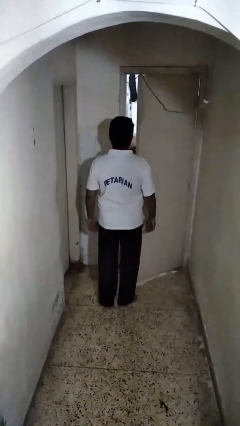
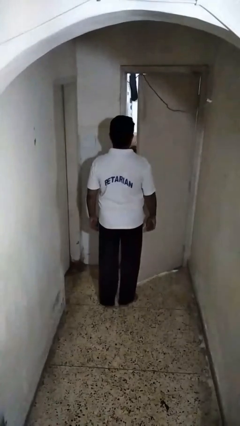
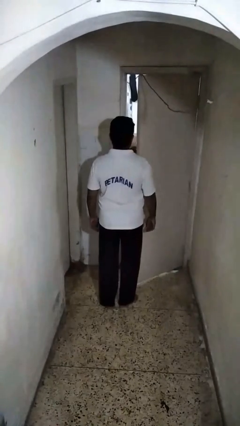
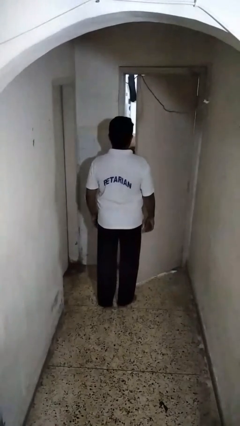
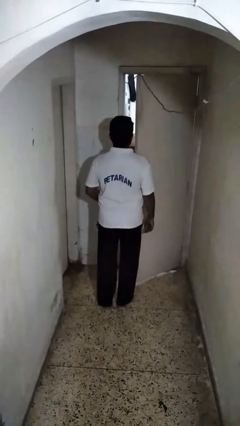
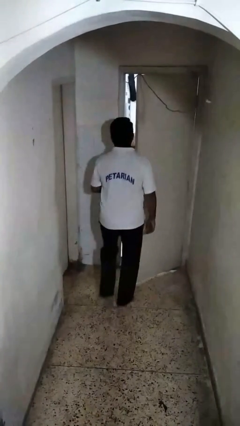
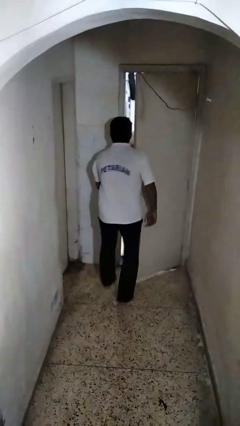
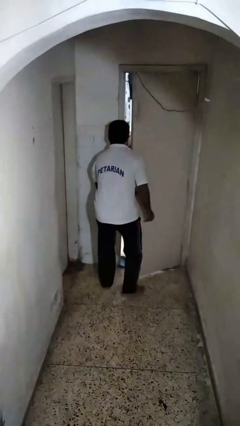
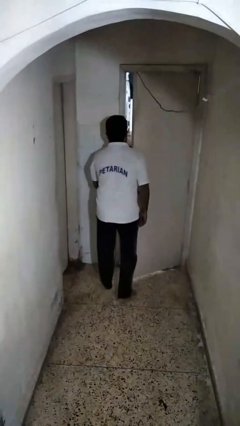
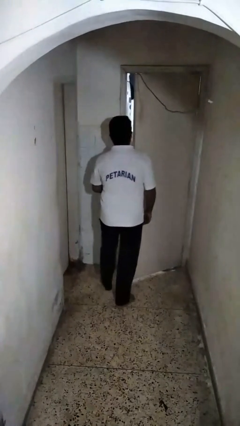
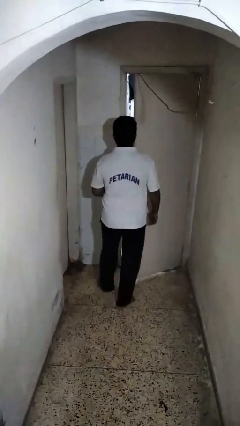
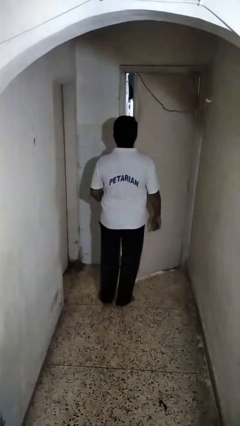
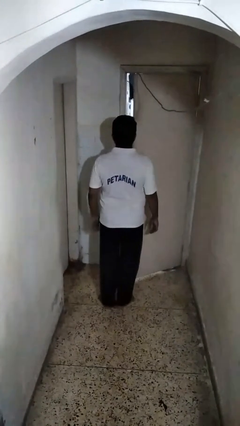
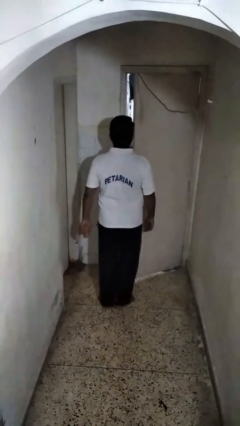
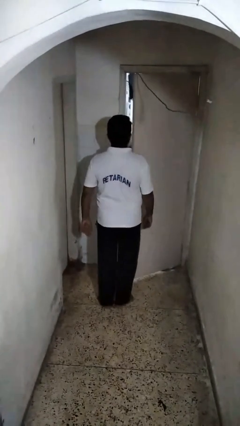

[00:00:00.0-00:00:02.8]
person bumps into wall

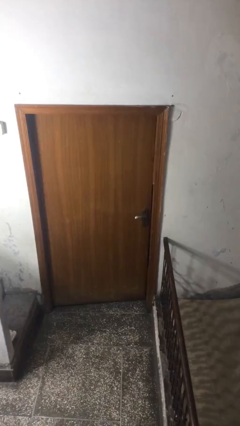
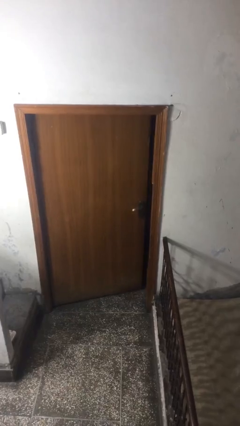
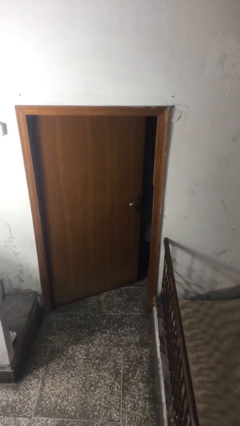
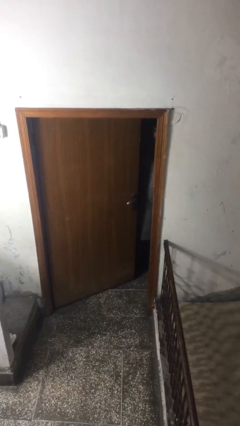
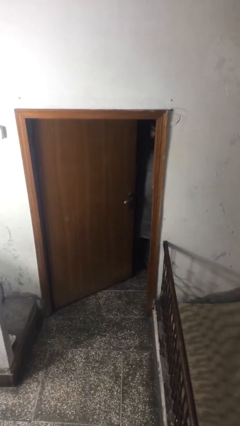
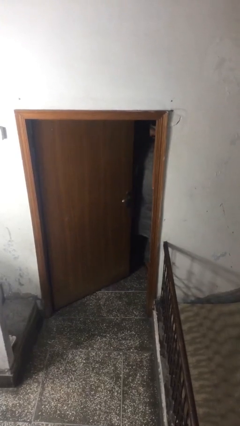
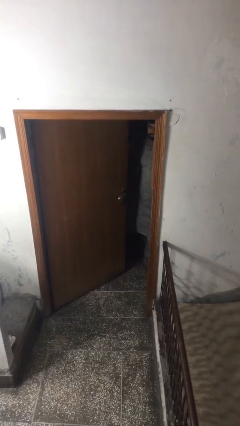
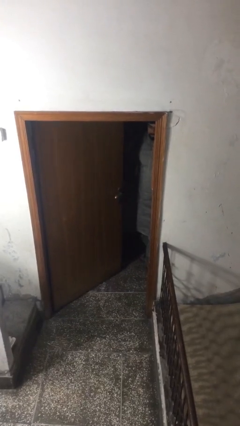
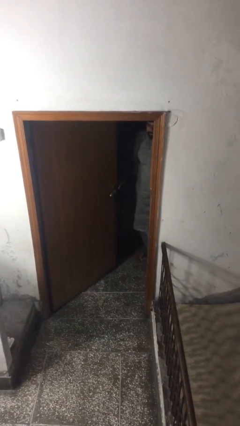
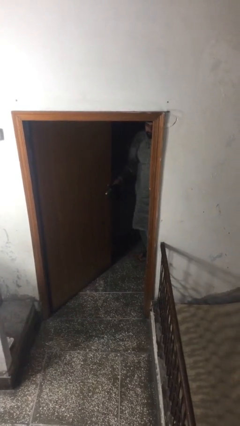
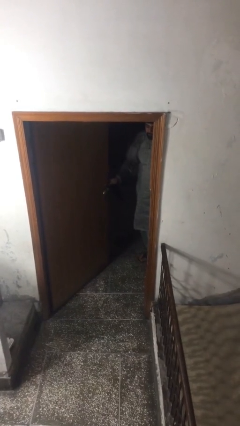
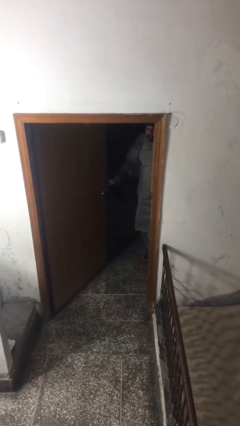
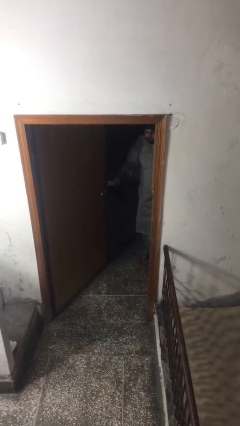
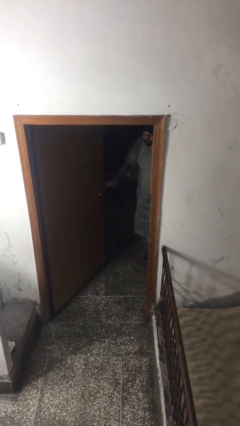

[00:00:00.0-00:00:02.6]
person opens facility door

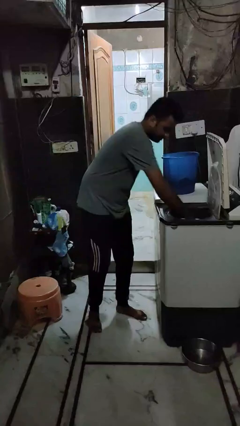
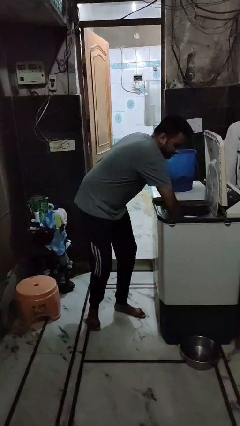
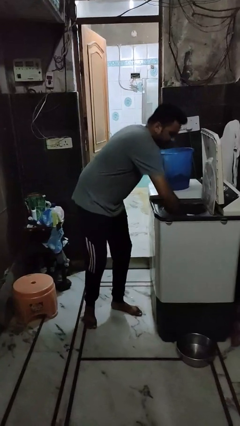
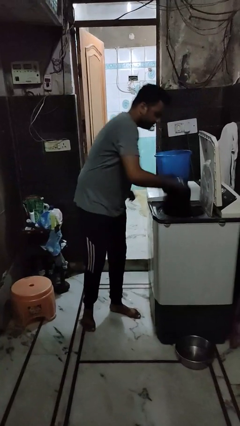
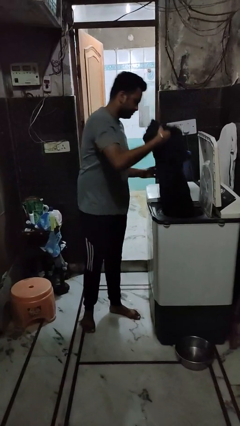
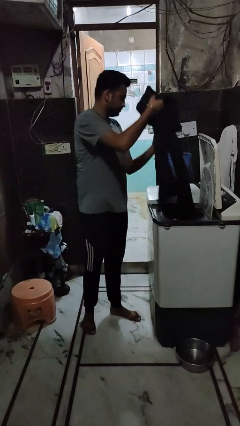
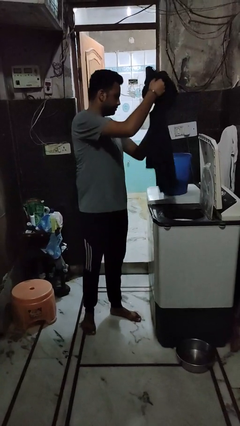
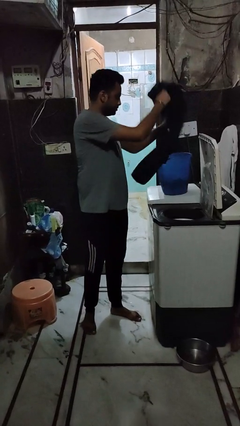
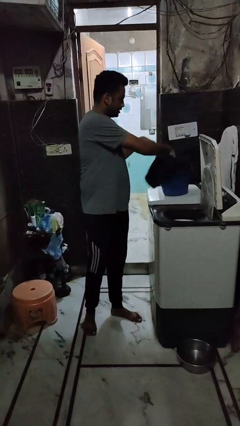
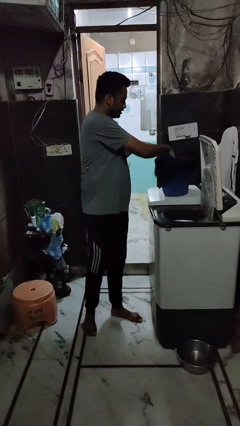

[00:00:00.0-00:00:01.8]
person unloads dryer

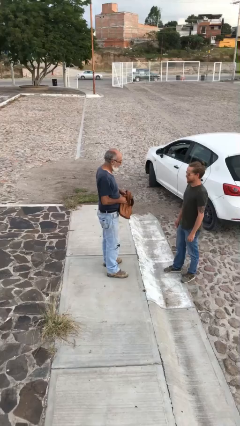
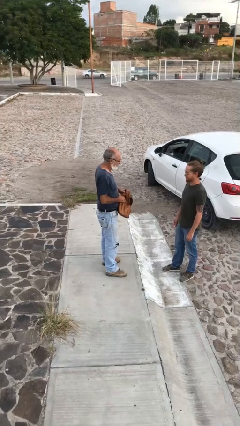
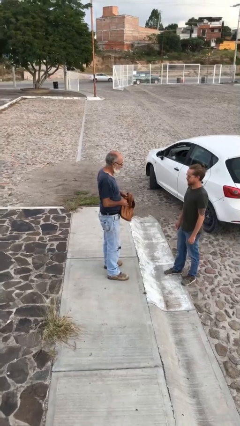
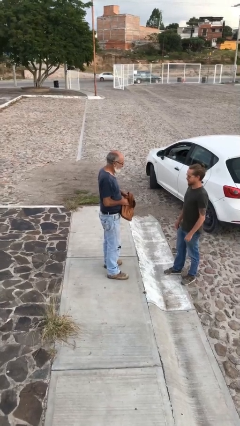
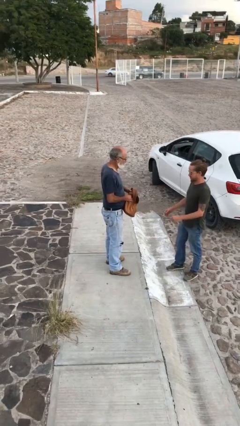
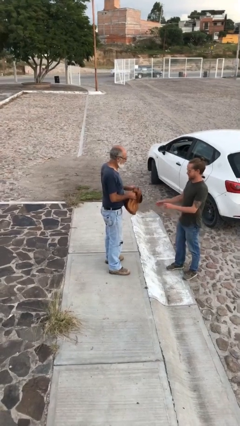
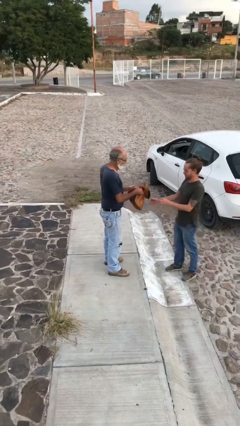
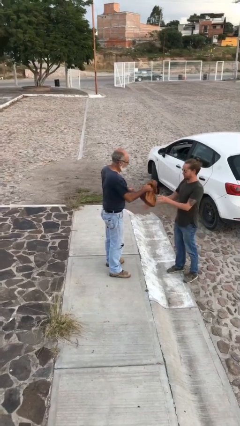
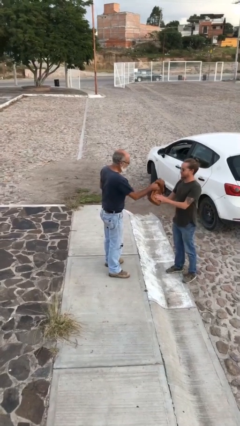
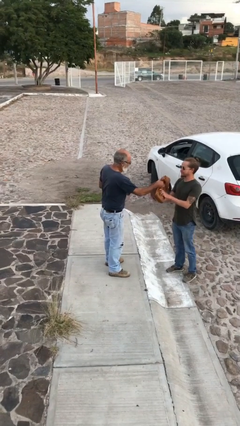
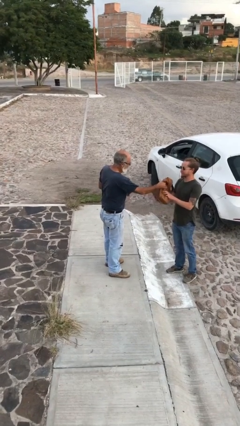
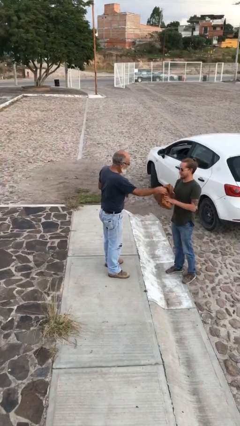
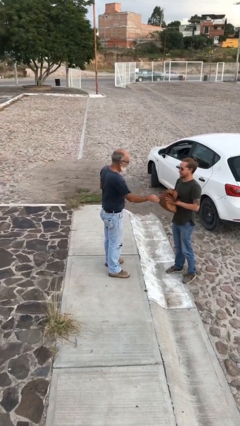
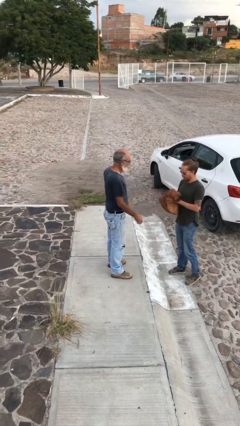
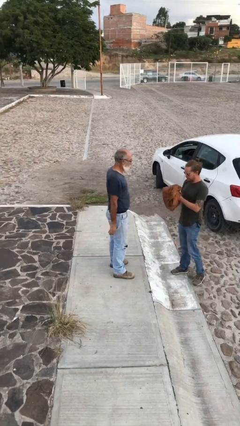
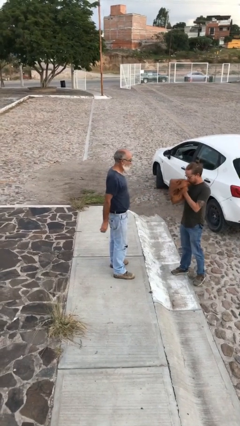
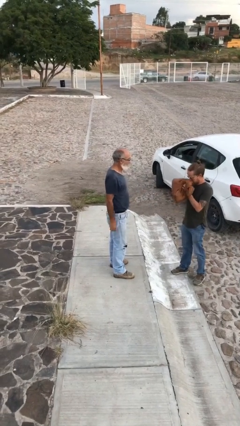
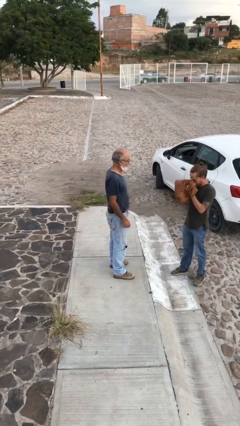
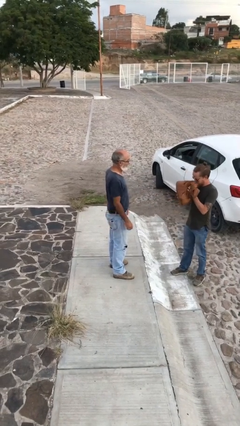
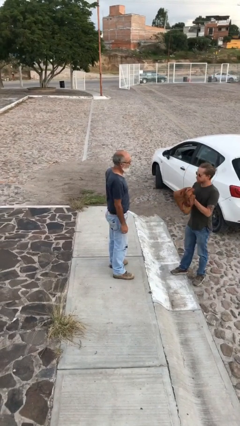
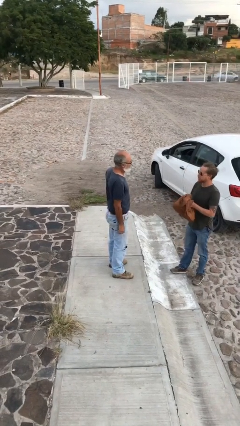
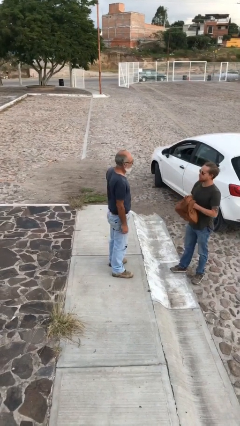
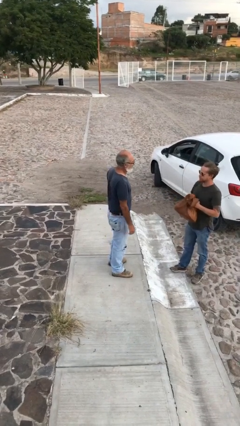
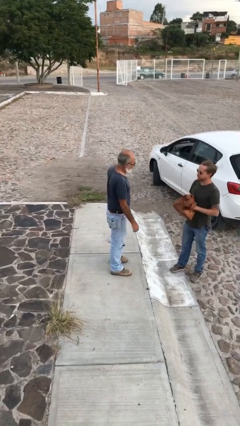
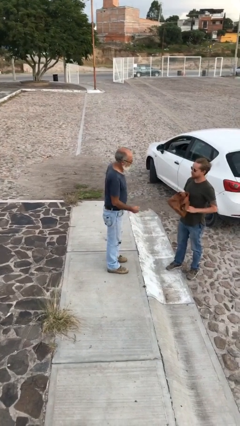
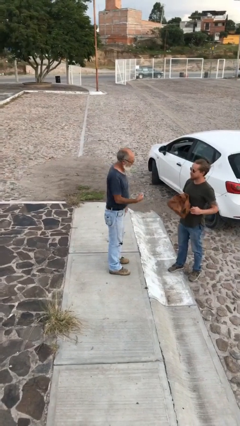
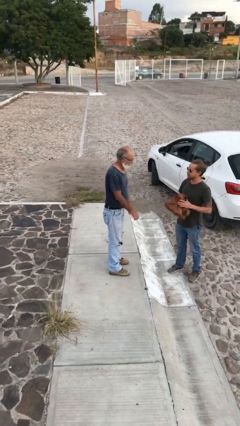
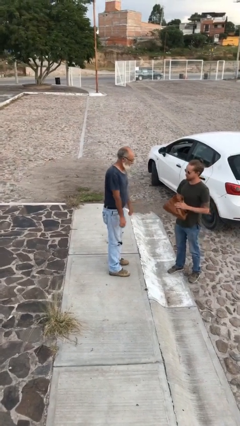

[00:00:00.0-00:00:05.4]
person transfers object to person

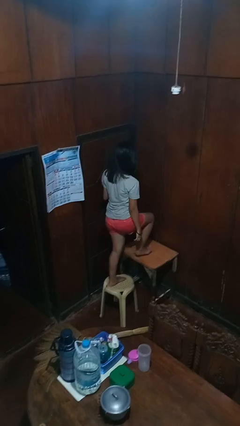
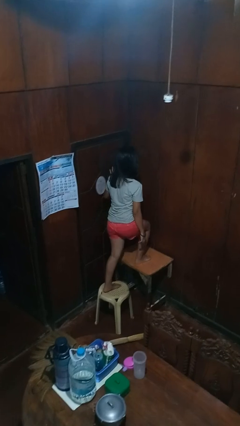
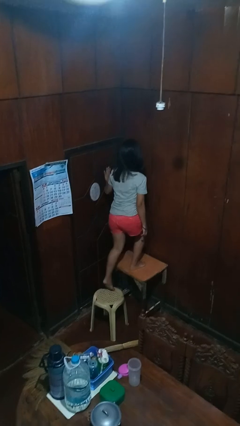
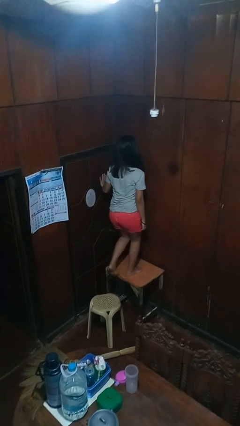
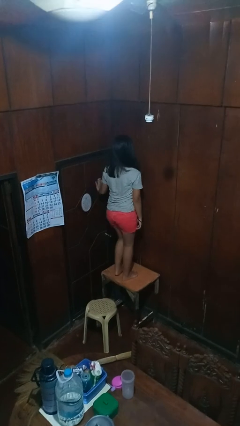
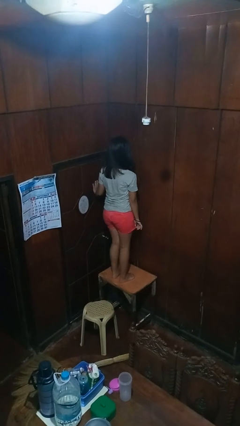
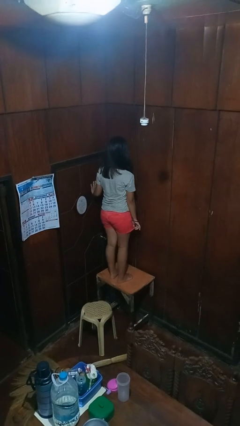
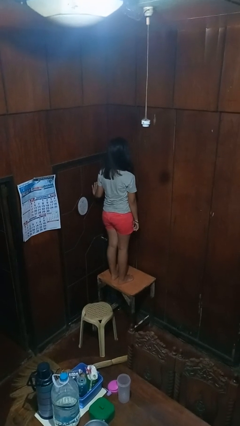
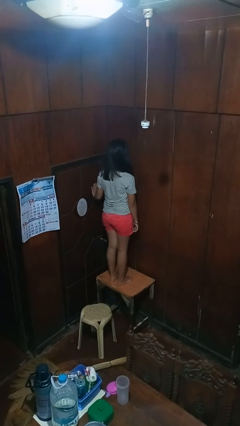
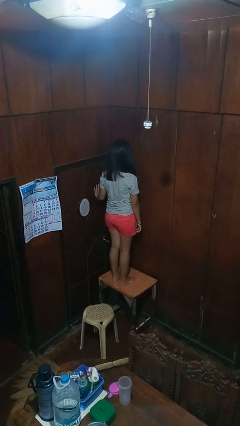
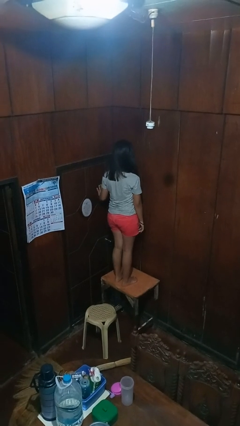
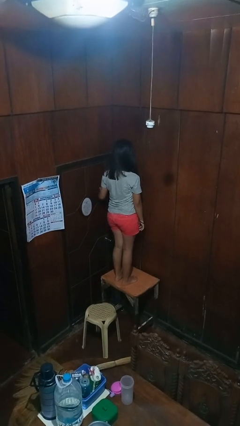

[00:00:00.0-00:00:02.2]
person climbs on table

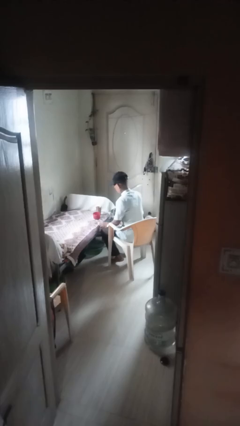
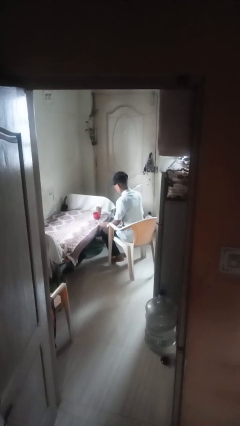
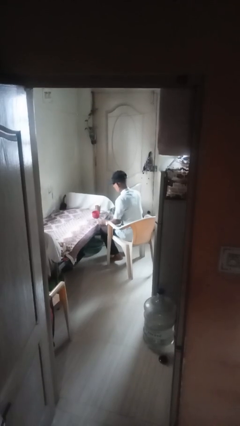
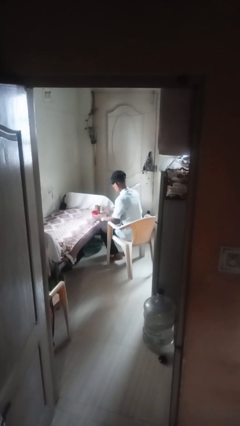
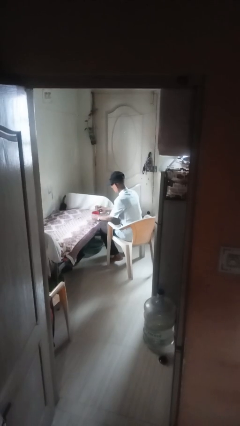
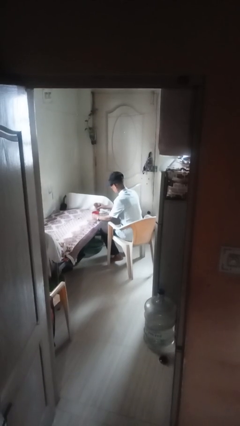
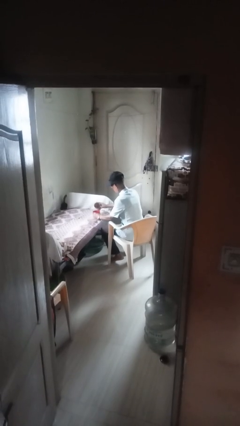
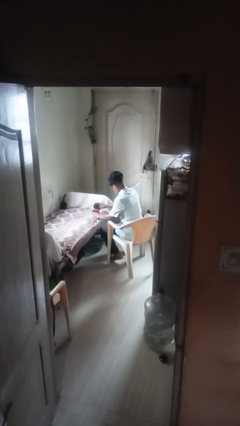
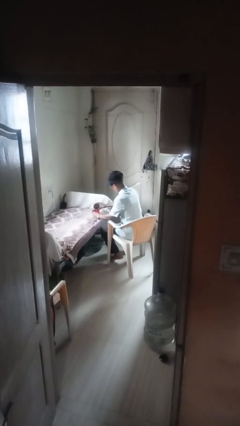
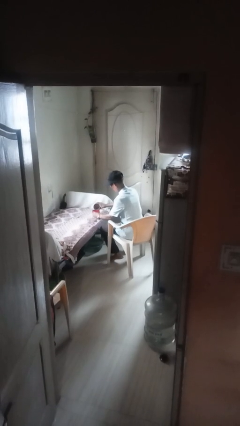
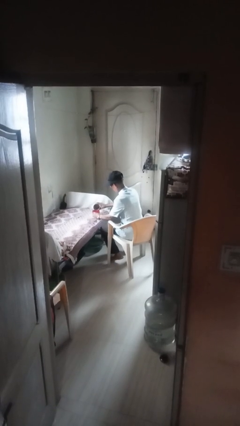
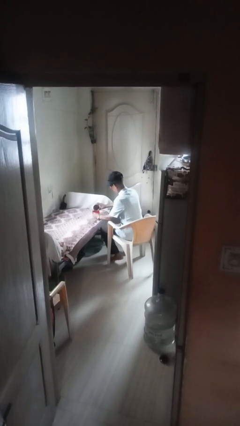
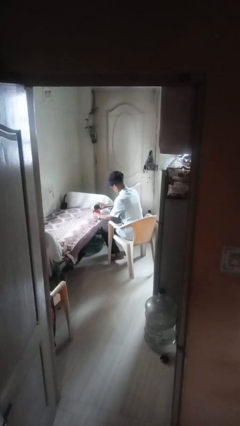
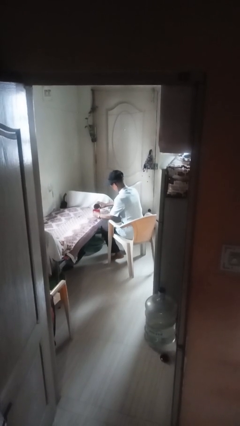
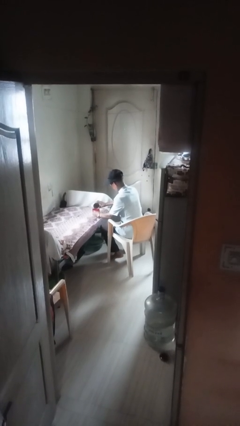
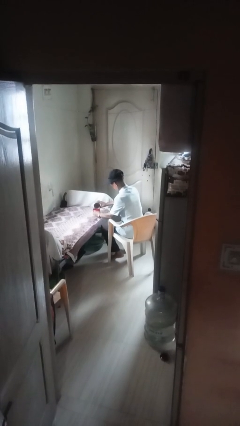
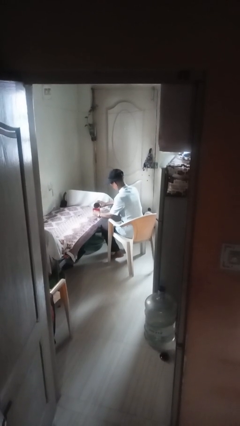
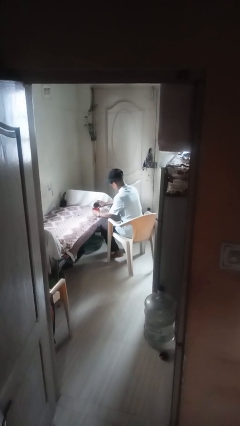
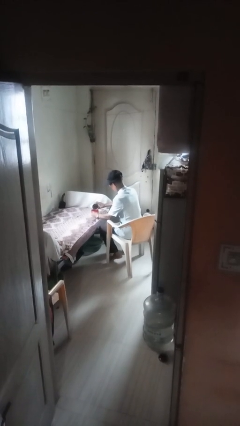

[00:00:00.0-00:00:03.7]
person pours coffee into mug
